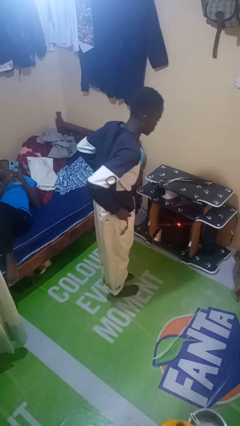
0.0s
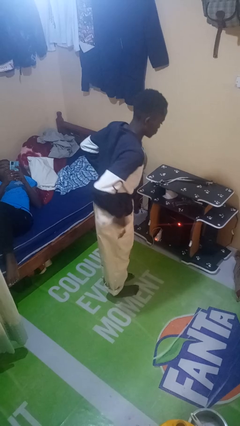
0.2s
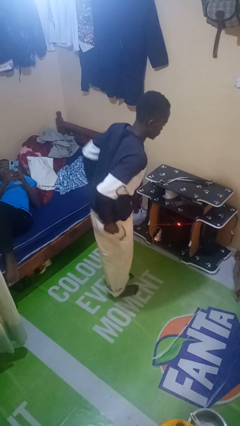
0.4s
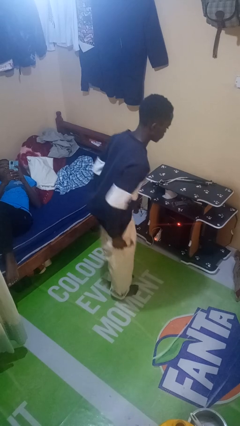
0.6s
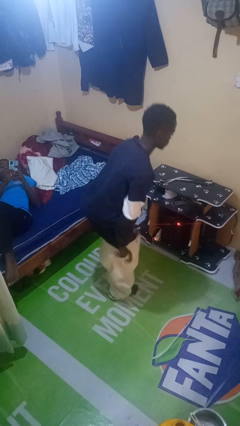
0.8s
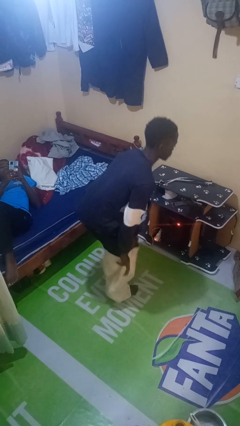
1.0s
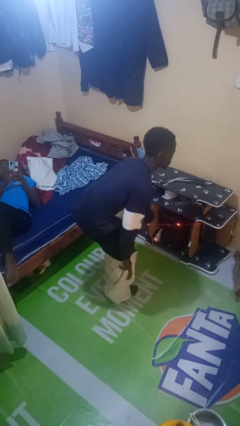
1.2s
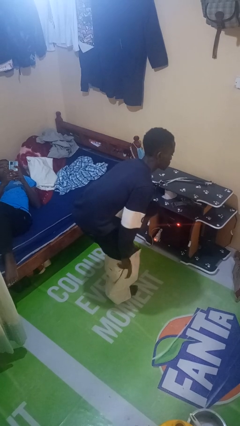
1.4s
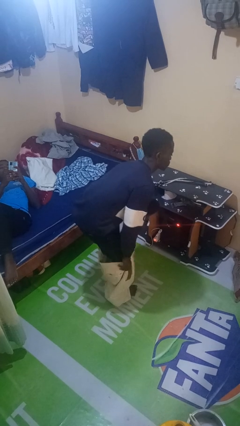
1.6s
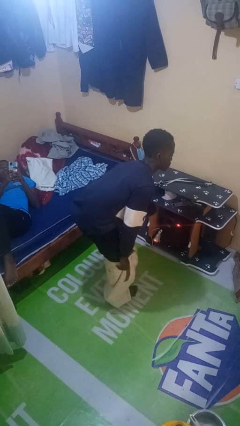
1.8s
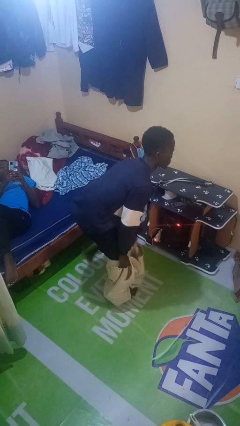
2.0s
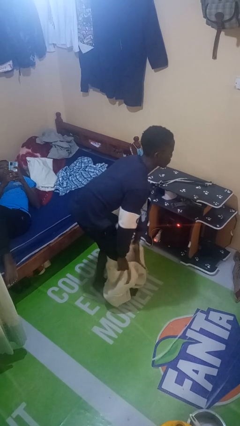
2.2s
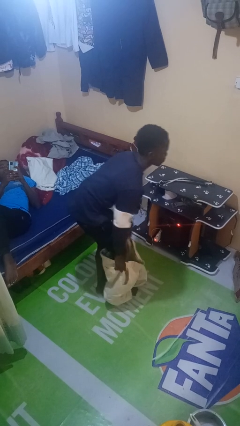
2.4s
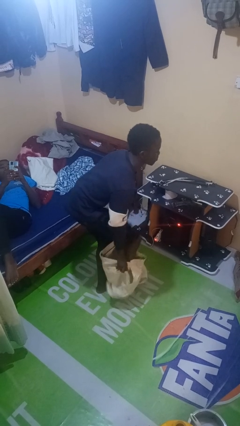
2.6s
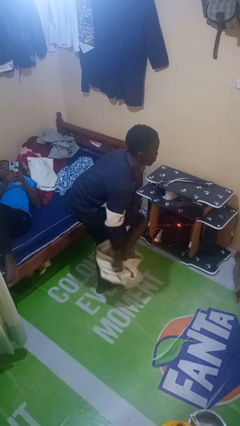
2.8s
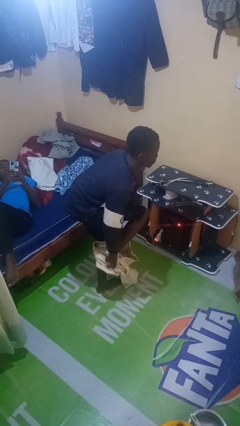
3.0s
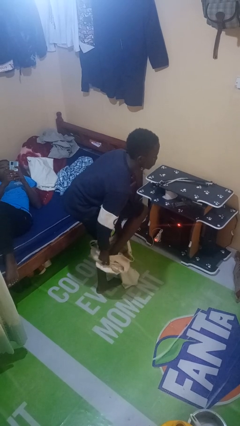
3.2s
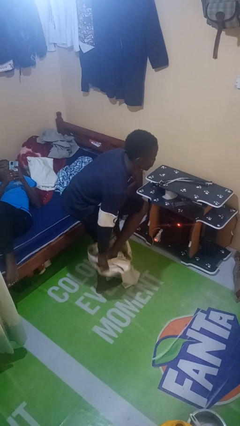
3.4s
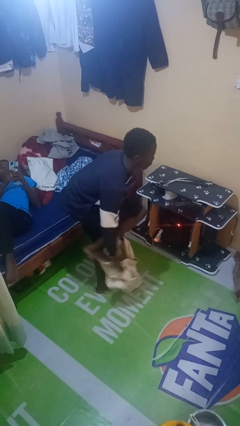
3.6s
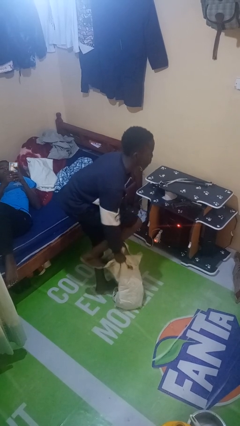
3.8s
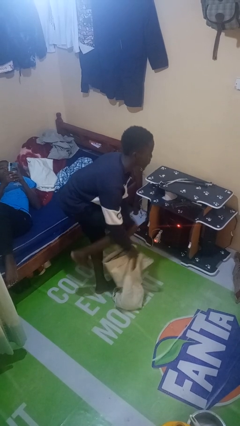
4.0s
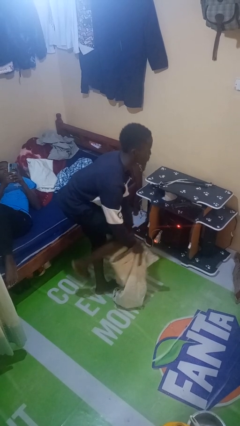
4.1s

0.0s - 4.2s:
person takes off pants

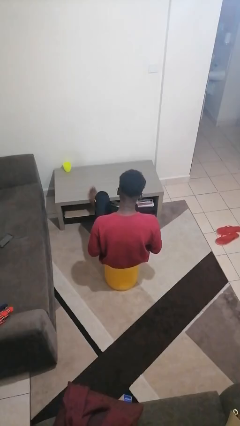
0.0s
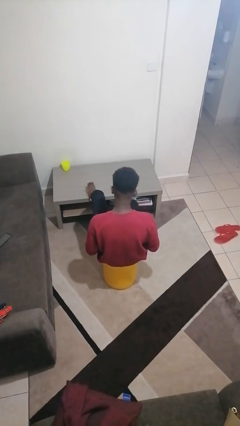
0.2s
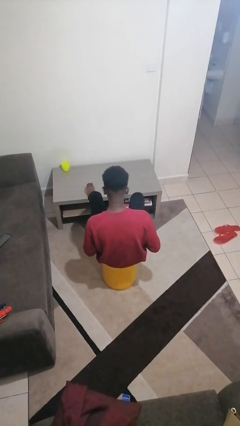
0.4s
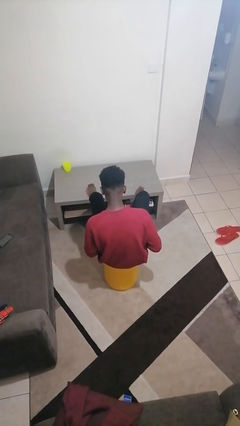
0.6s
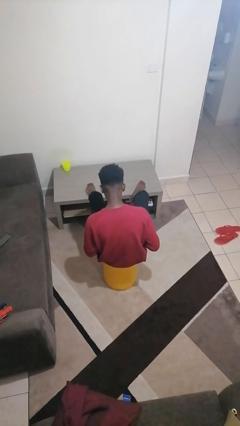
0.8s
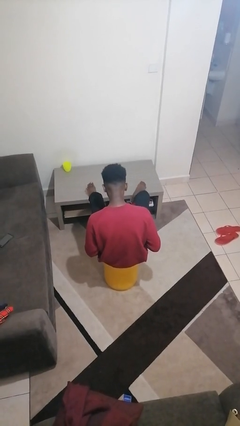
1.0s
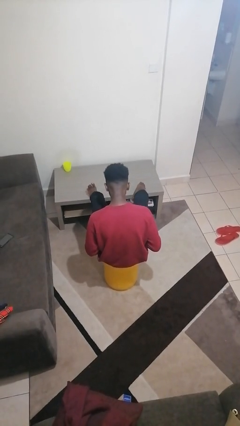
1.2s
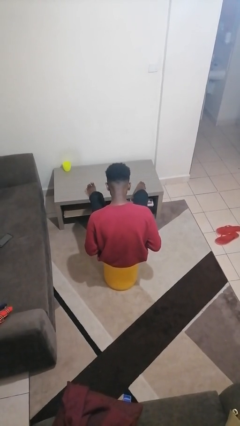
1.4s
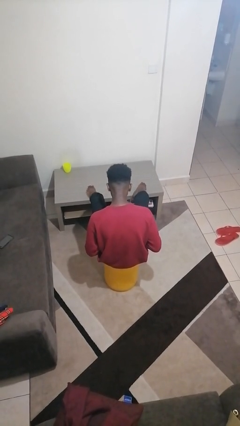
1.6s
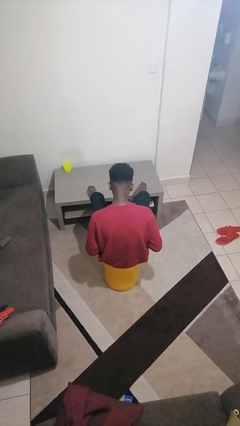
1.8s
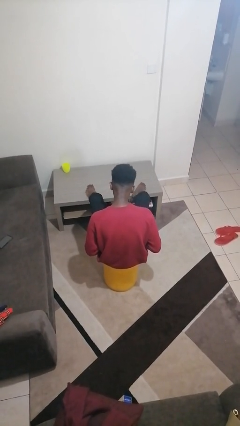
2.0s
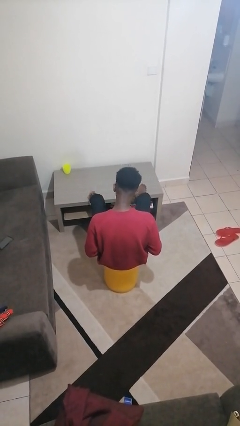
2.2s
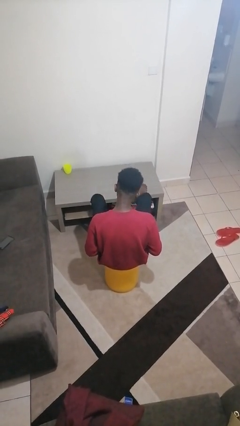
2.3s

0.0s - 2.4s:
person puts feet up

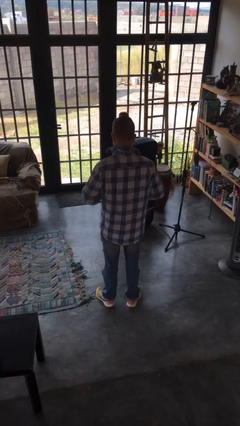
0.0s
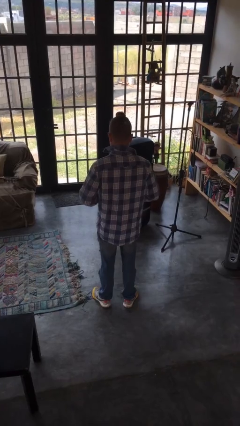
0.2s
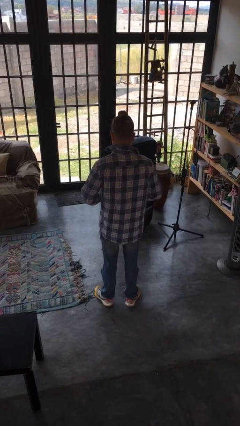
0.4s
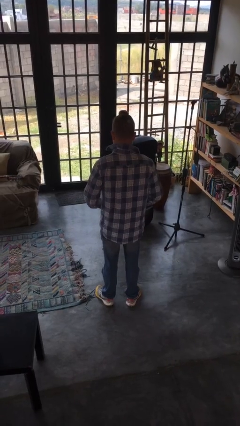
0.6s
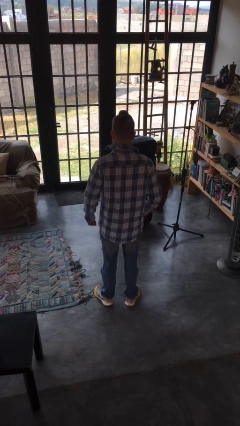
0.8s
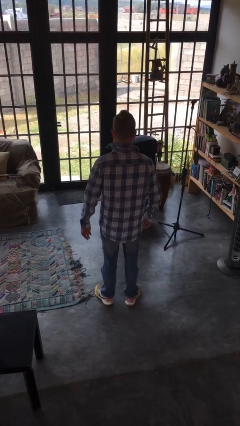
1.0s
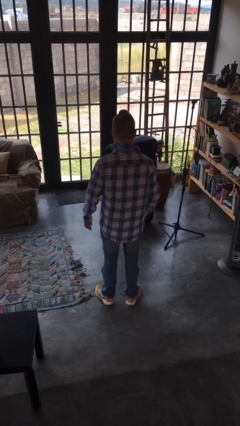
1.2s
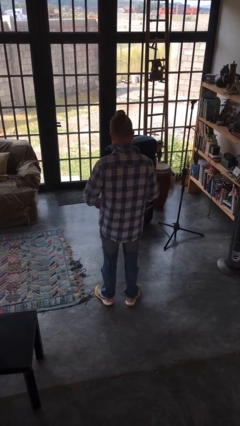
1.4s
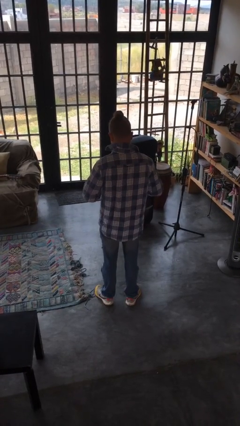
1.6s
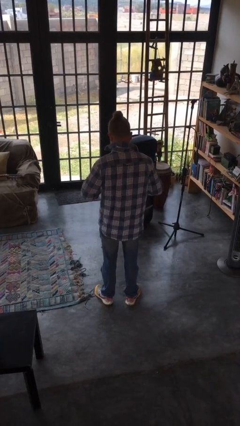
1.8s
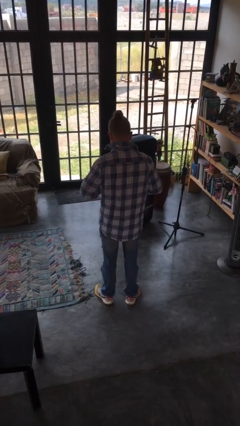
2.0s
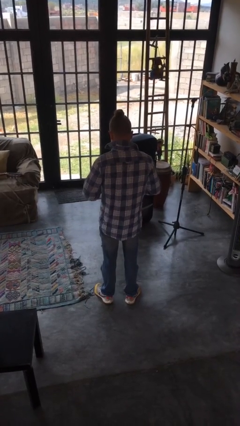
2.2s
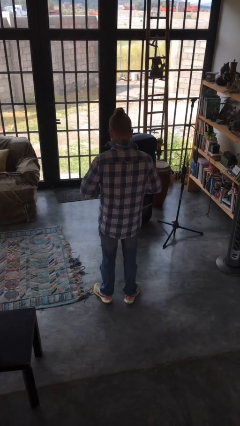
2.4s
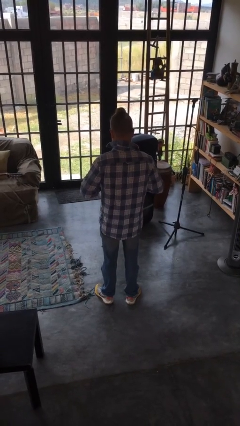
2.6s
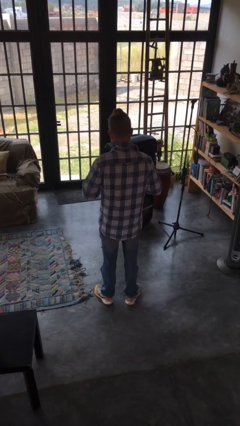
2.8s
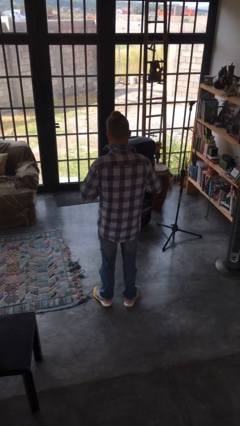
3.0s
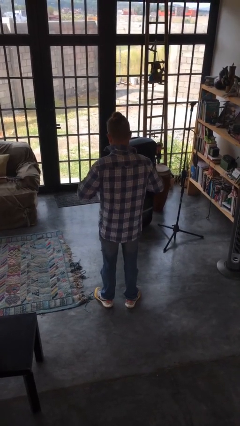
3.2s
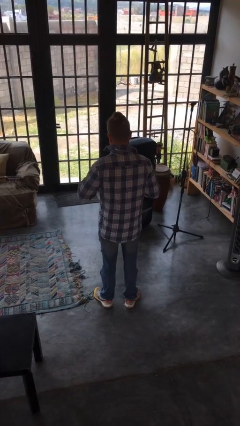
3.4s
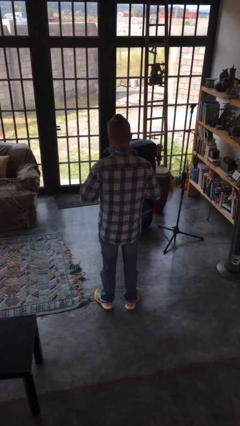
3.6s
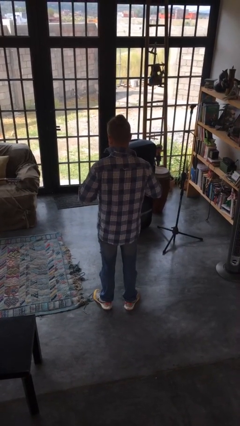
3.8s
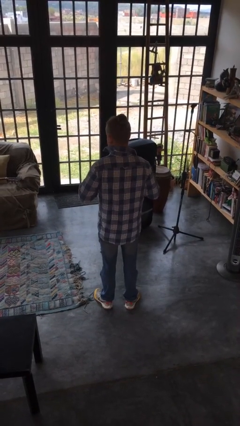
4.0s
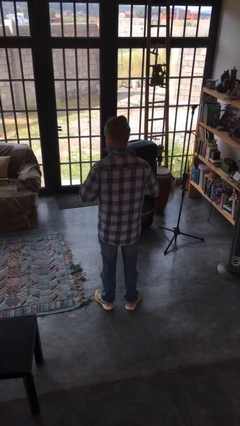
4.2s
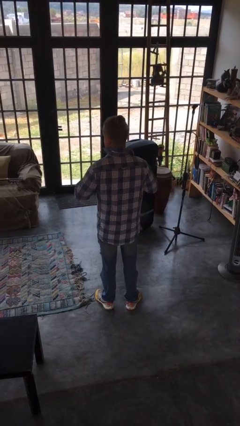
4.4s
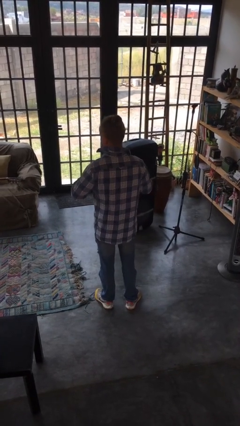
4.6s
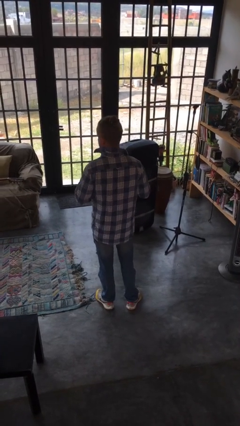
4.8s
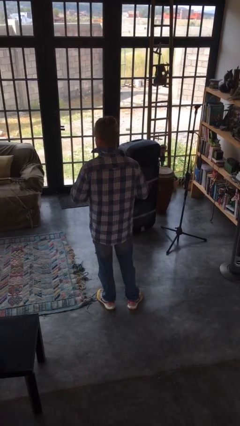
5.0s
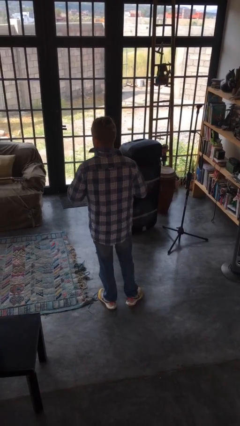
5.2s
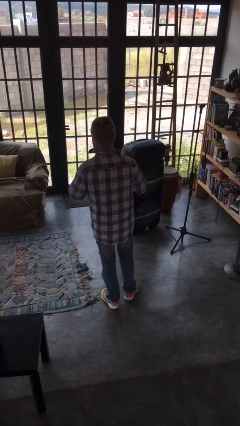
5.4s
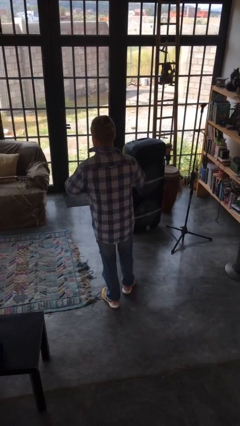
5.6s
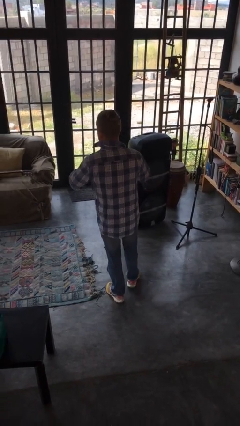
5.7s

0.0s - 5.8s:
person buttons shirt

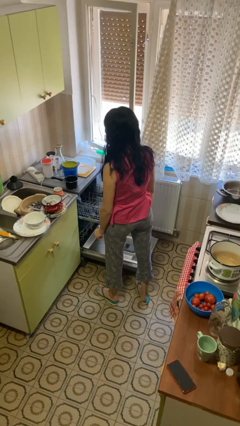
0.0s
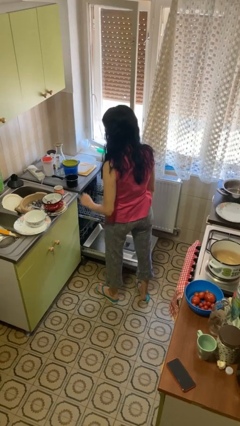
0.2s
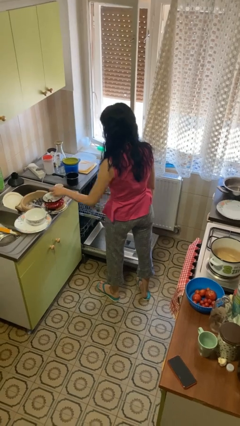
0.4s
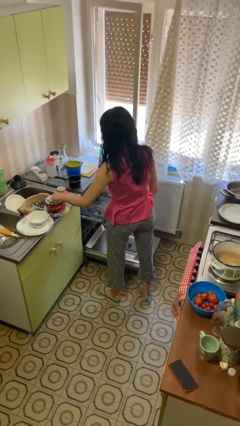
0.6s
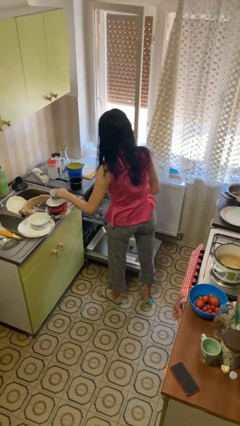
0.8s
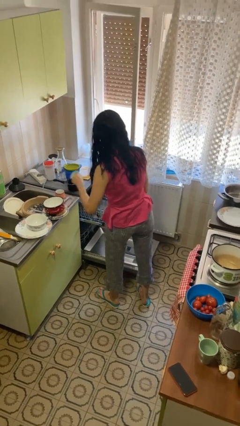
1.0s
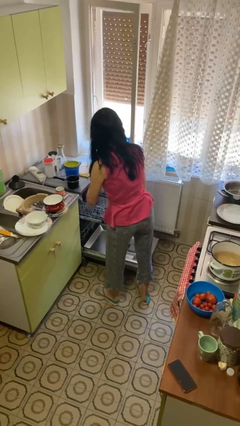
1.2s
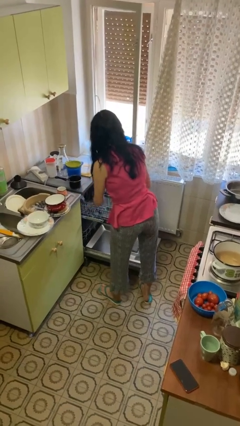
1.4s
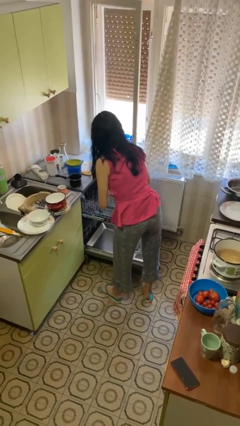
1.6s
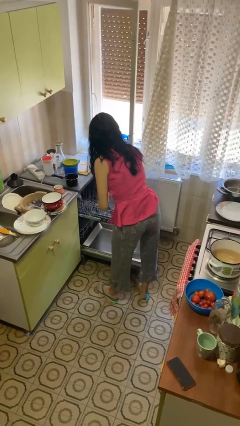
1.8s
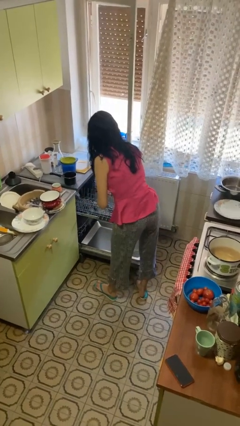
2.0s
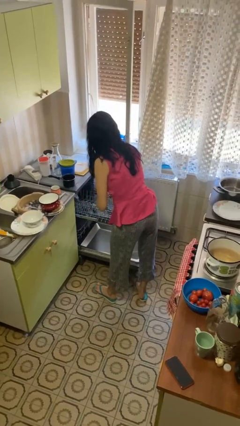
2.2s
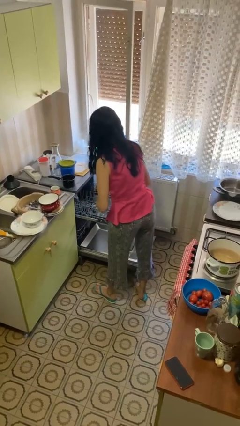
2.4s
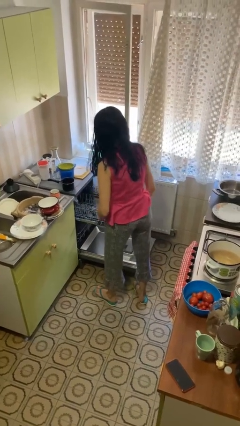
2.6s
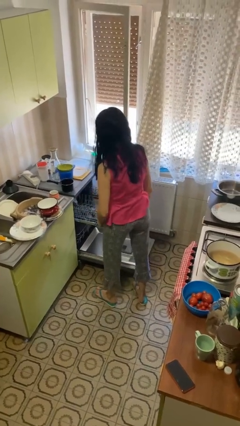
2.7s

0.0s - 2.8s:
person loads dishwasher

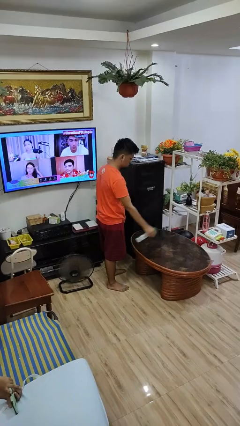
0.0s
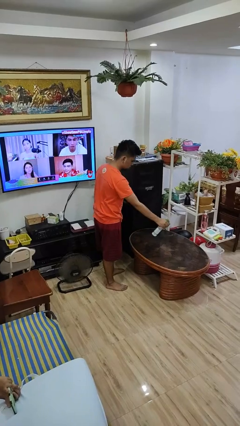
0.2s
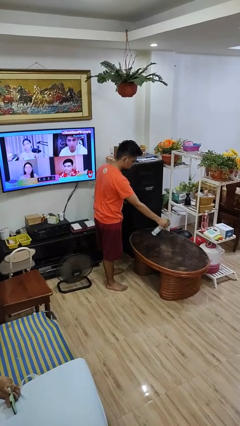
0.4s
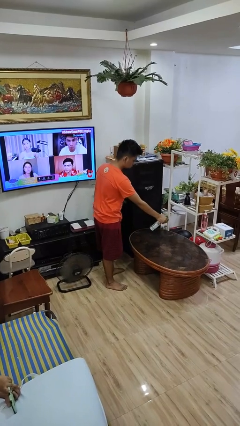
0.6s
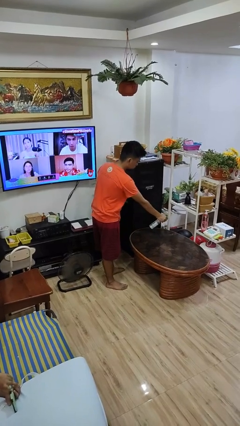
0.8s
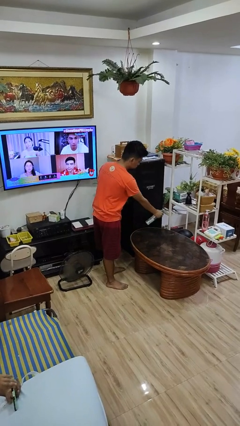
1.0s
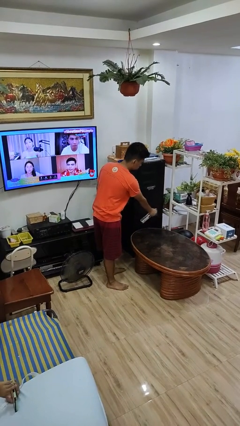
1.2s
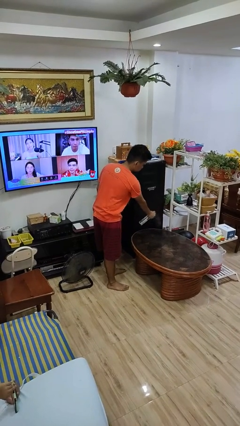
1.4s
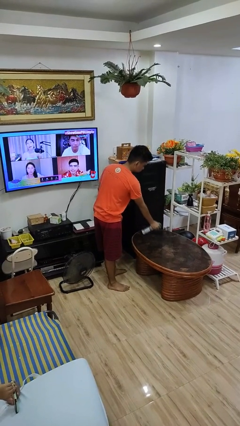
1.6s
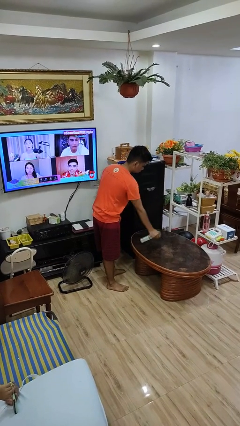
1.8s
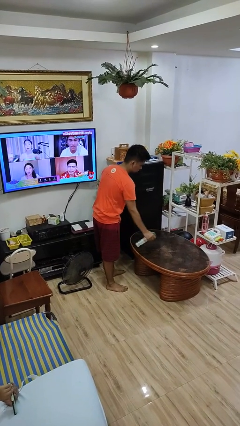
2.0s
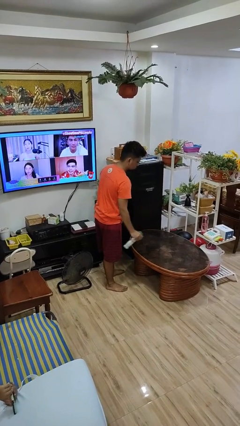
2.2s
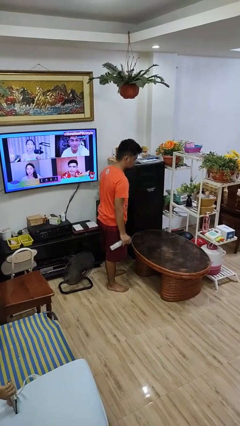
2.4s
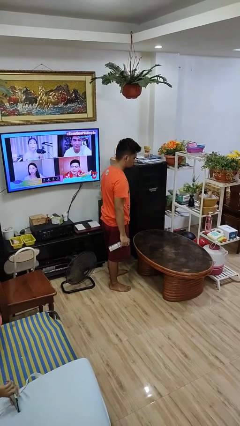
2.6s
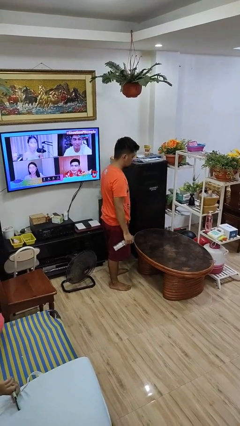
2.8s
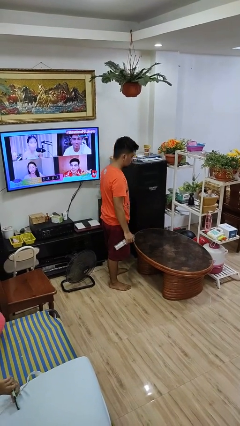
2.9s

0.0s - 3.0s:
person sprays from bottle
